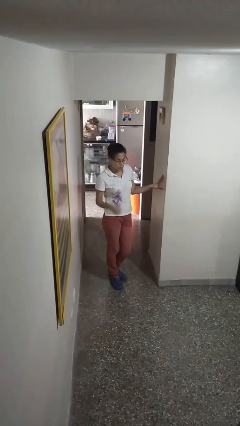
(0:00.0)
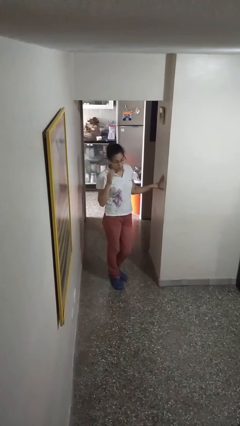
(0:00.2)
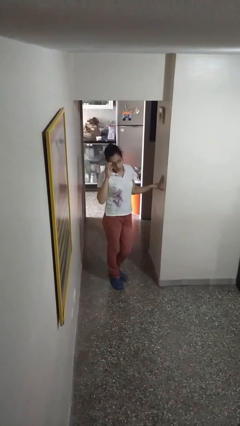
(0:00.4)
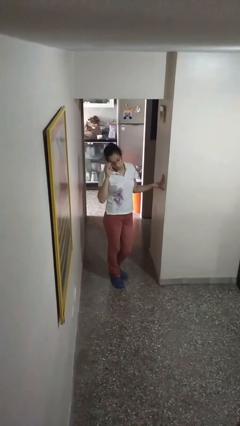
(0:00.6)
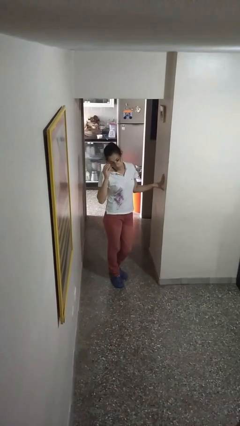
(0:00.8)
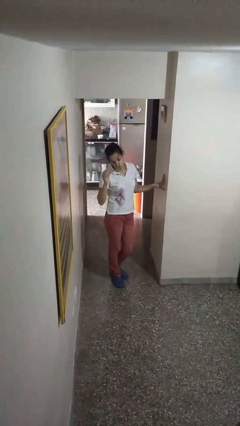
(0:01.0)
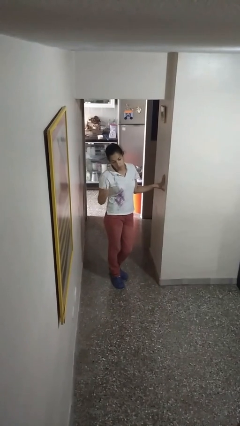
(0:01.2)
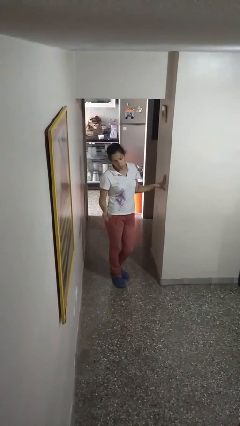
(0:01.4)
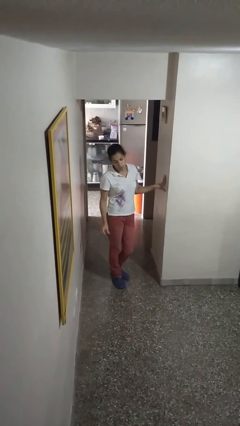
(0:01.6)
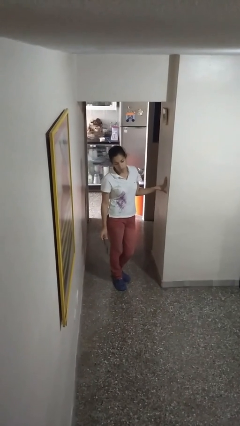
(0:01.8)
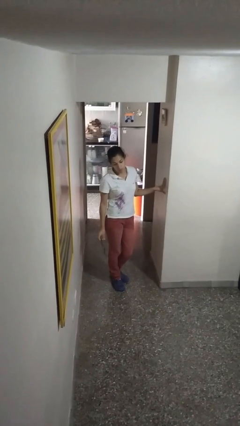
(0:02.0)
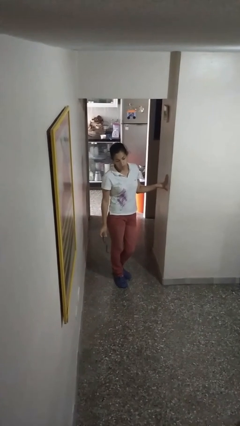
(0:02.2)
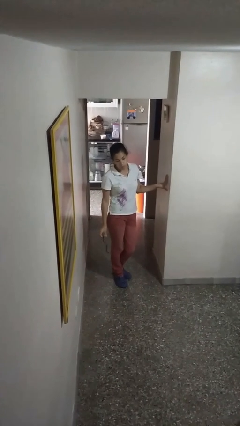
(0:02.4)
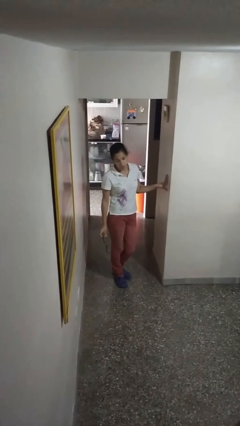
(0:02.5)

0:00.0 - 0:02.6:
person takes off glasses

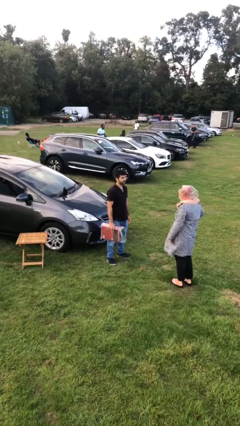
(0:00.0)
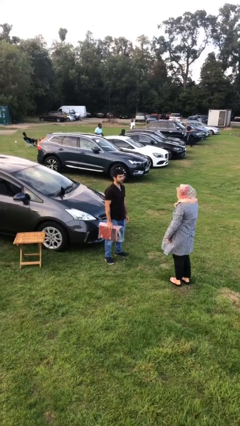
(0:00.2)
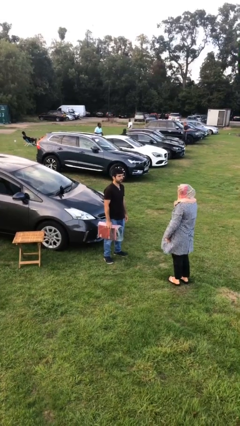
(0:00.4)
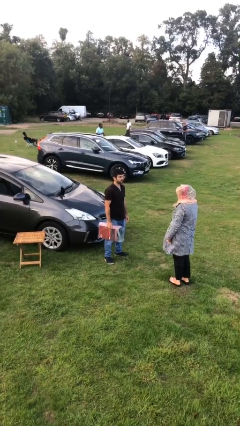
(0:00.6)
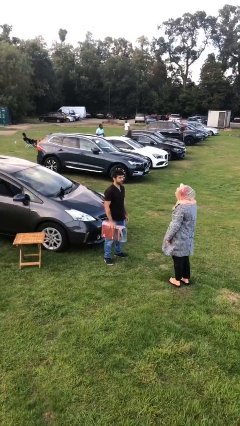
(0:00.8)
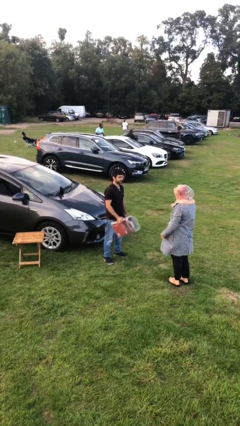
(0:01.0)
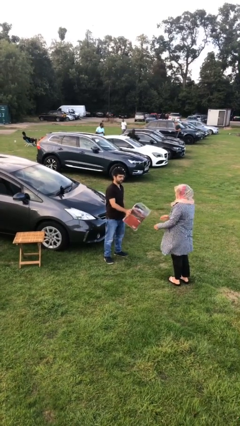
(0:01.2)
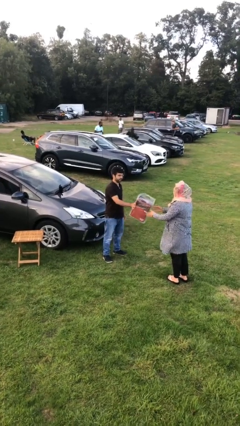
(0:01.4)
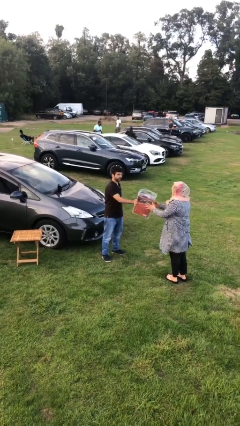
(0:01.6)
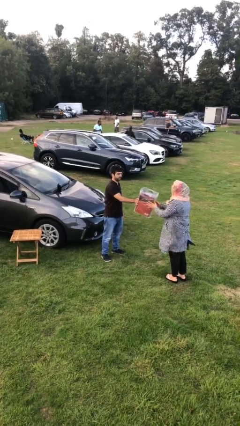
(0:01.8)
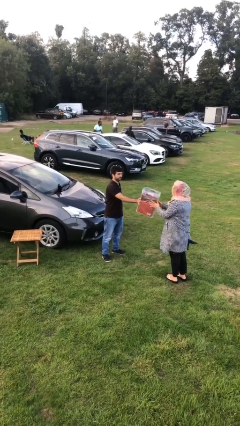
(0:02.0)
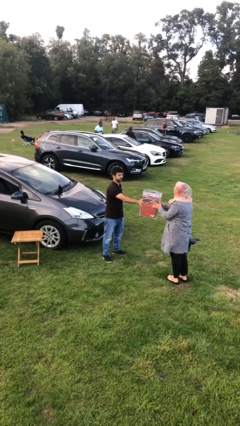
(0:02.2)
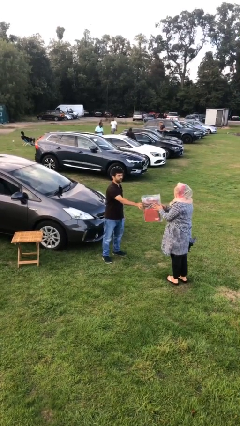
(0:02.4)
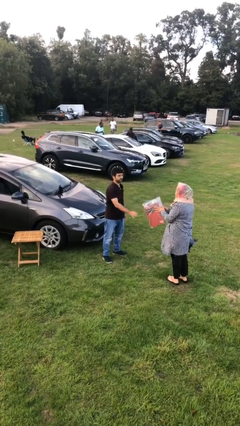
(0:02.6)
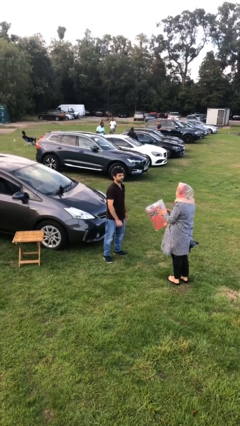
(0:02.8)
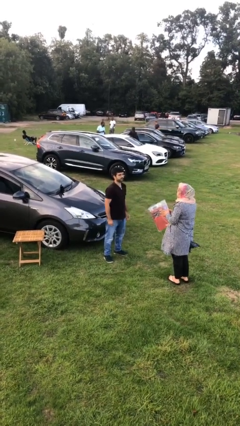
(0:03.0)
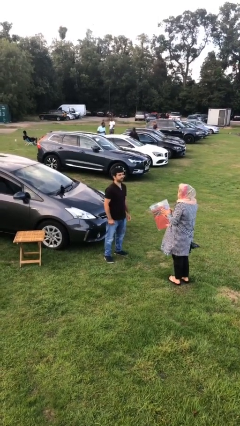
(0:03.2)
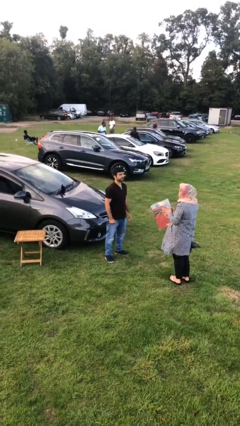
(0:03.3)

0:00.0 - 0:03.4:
person transfers object to person

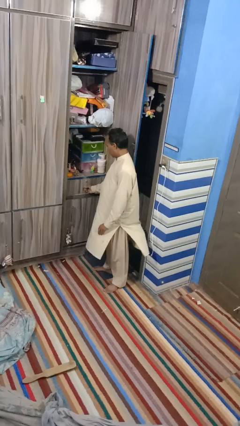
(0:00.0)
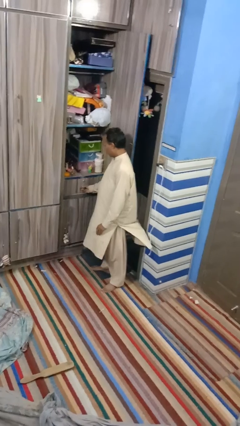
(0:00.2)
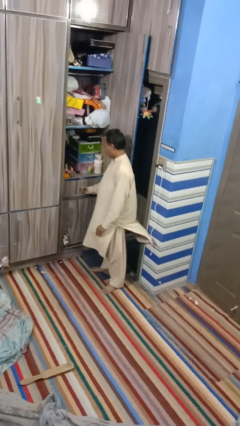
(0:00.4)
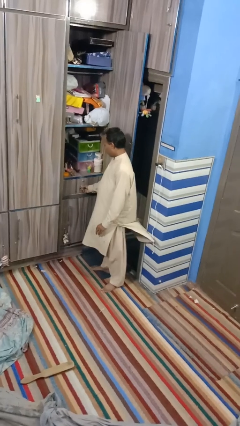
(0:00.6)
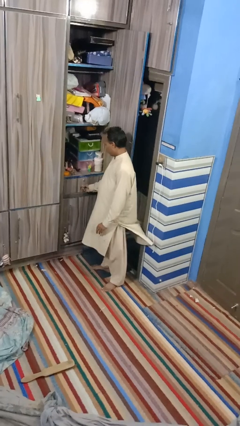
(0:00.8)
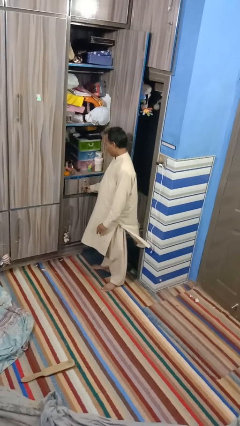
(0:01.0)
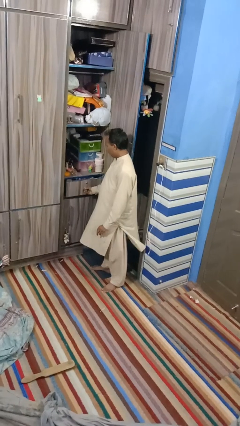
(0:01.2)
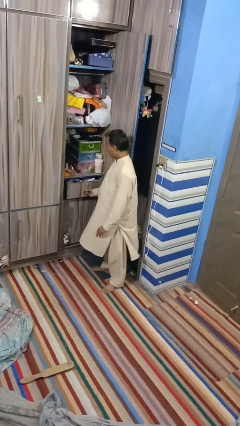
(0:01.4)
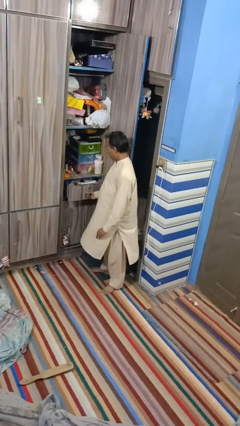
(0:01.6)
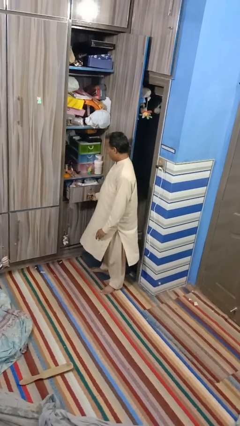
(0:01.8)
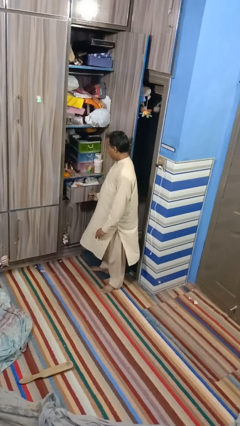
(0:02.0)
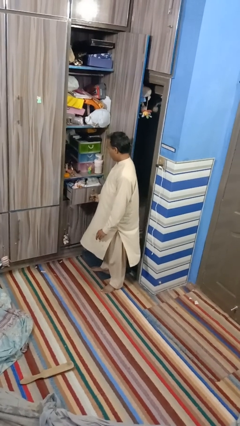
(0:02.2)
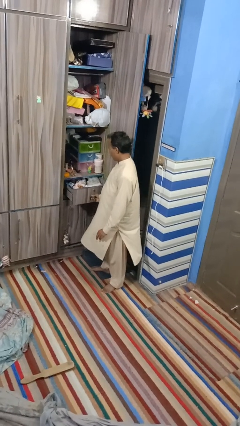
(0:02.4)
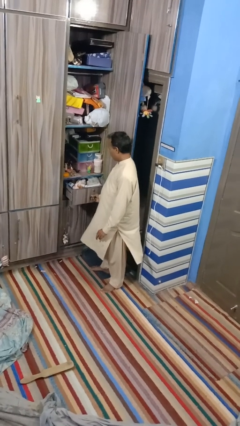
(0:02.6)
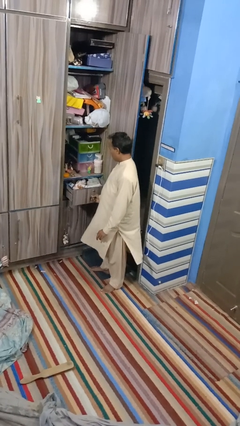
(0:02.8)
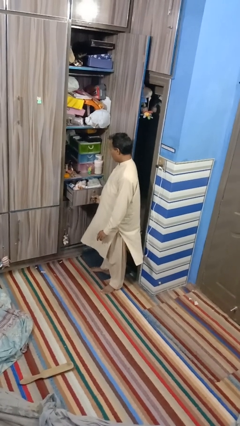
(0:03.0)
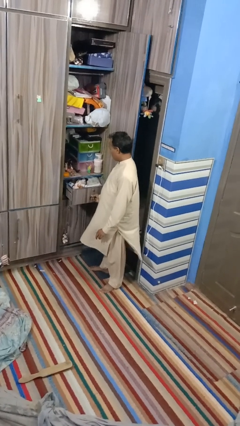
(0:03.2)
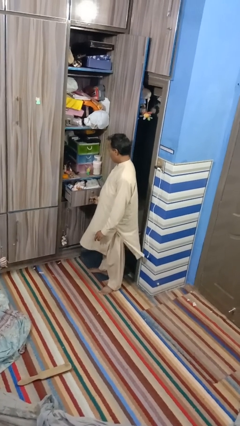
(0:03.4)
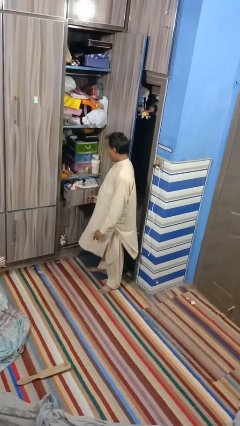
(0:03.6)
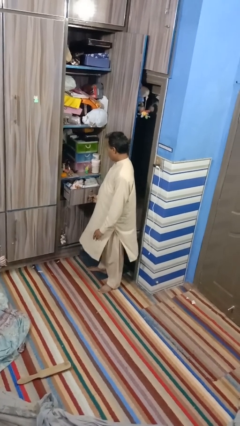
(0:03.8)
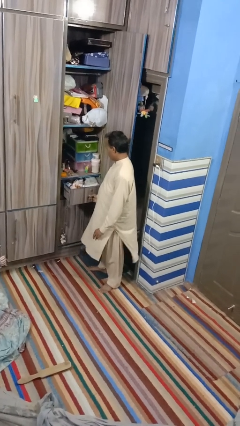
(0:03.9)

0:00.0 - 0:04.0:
person opens dresser drawer

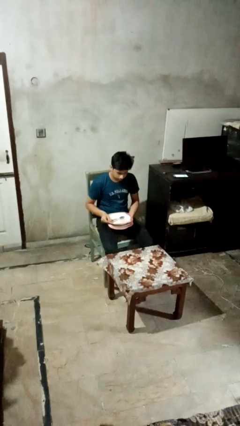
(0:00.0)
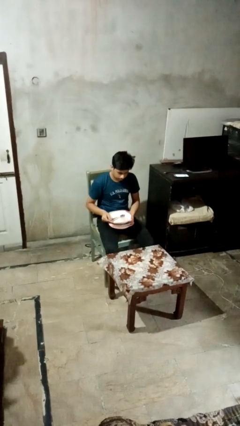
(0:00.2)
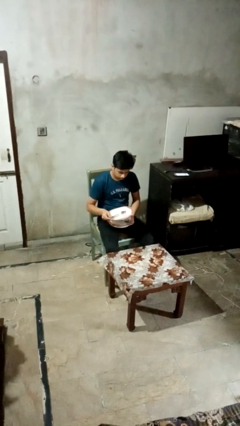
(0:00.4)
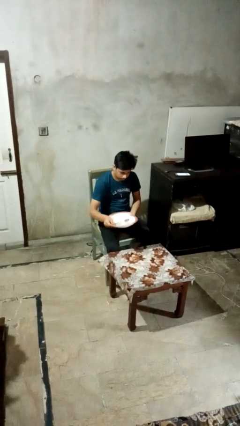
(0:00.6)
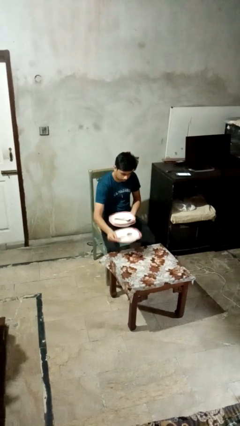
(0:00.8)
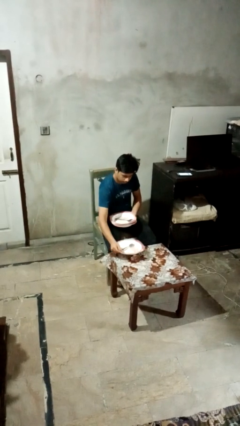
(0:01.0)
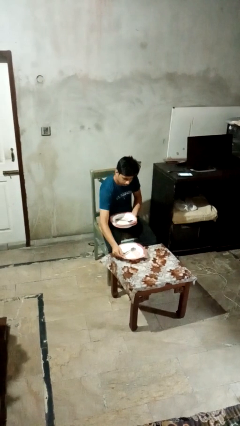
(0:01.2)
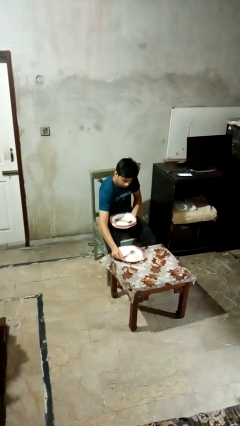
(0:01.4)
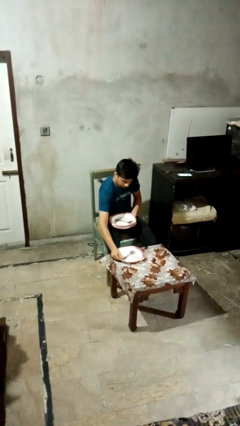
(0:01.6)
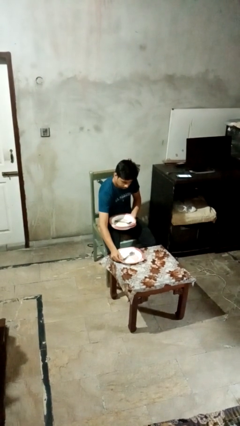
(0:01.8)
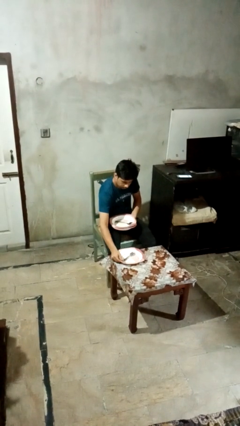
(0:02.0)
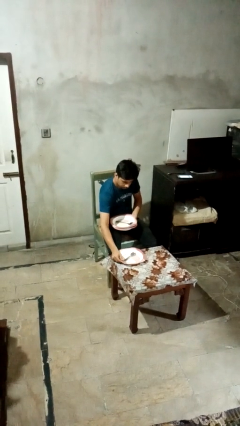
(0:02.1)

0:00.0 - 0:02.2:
person sets table

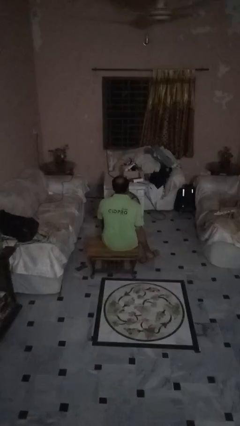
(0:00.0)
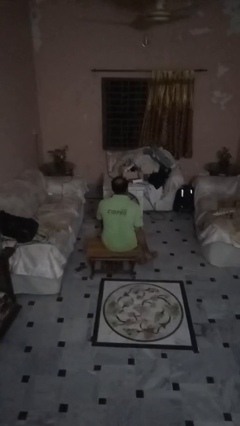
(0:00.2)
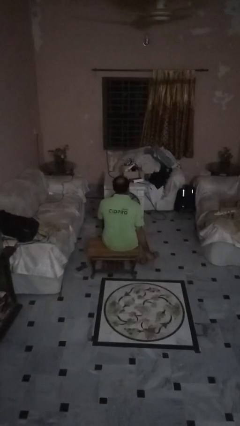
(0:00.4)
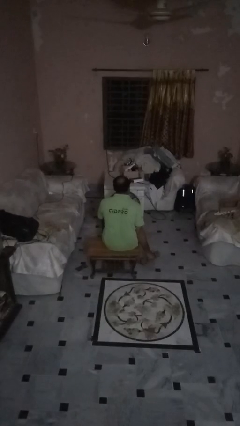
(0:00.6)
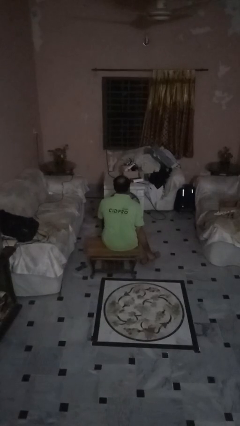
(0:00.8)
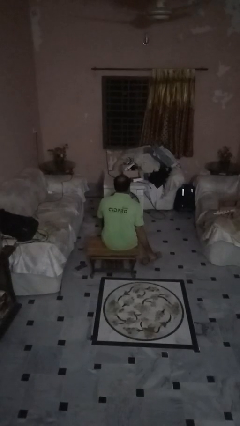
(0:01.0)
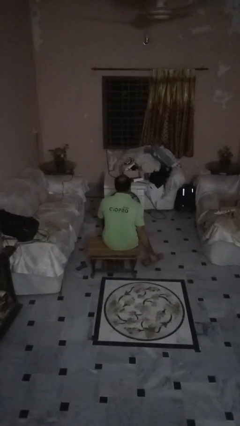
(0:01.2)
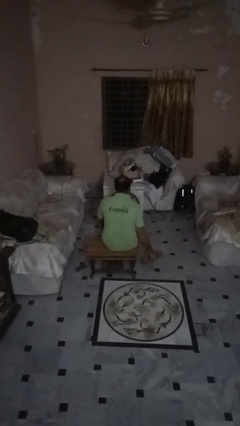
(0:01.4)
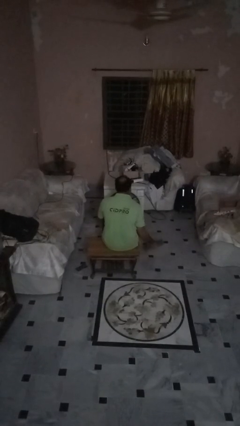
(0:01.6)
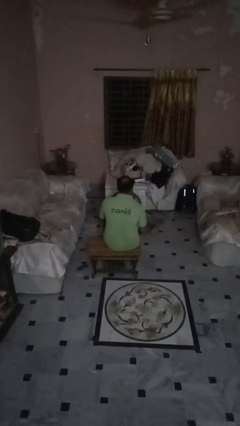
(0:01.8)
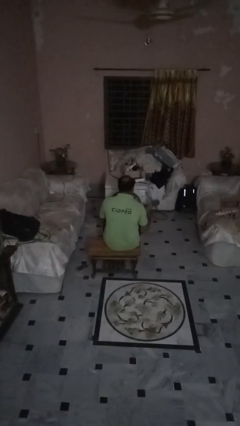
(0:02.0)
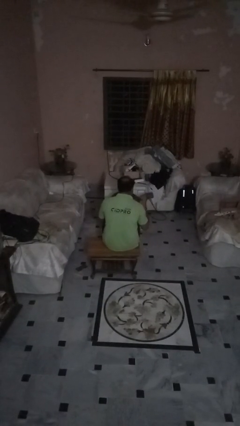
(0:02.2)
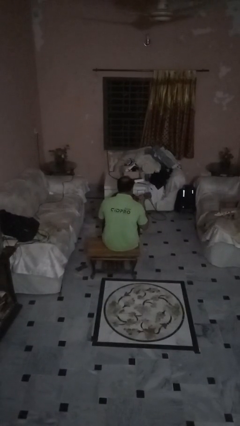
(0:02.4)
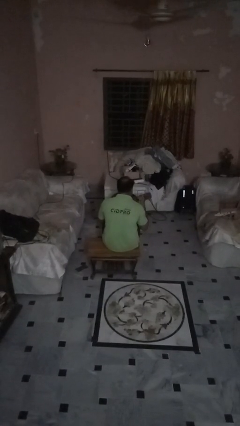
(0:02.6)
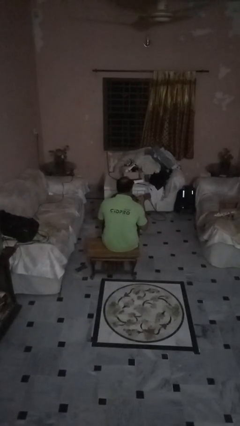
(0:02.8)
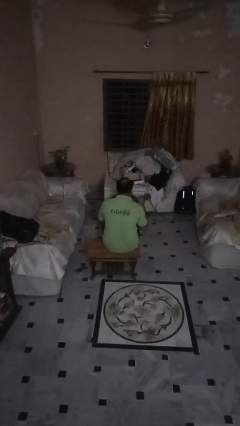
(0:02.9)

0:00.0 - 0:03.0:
person lifts dumbbells

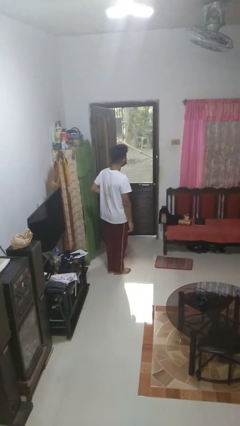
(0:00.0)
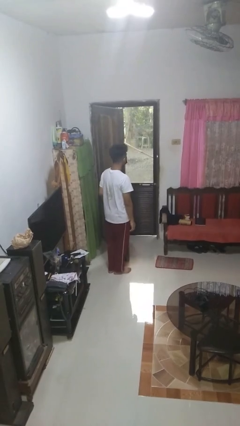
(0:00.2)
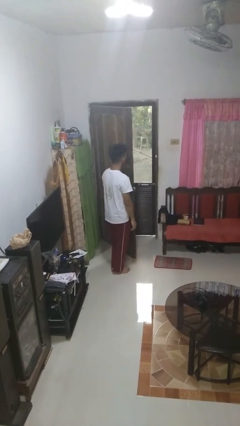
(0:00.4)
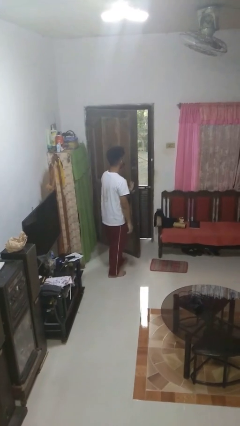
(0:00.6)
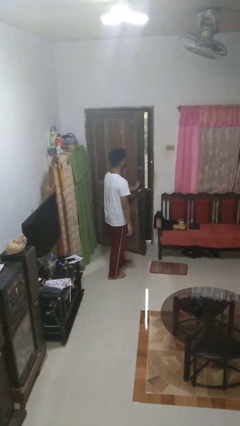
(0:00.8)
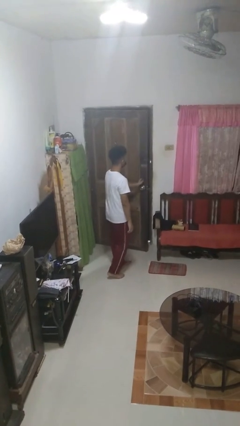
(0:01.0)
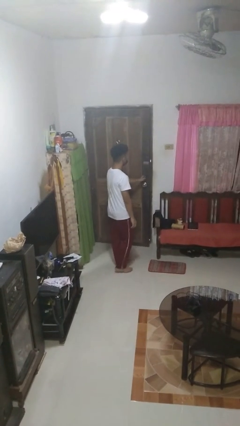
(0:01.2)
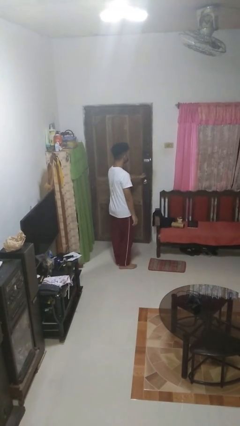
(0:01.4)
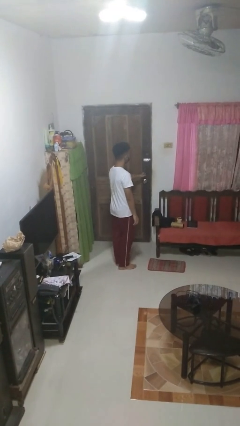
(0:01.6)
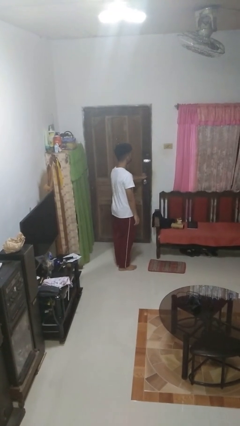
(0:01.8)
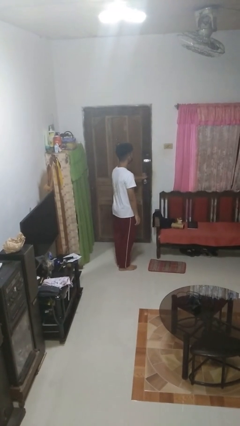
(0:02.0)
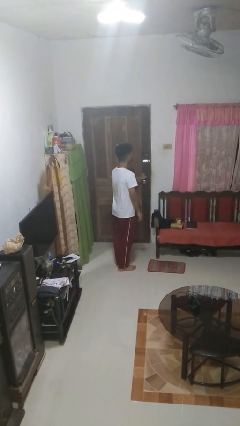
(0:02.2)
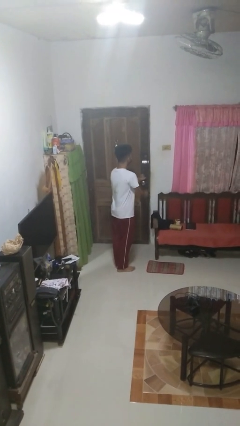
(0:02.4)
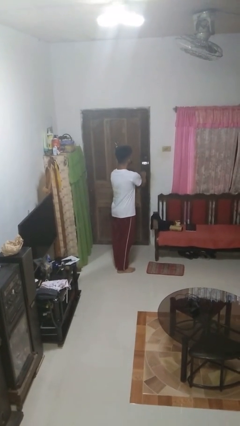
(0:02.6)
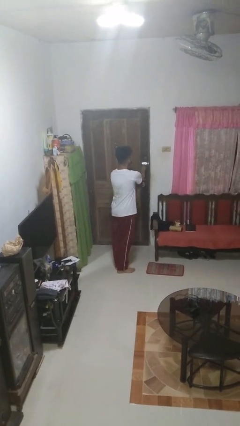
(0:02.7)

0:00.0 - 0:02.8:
person closes facility door
